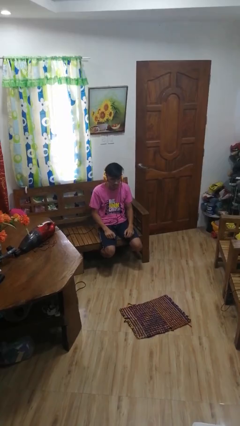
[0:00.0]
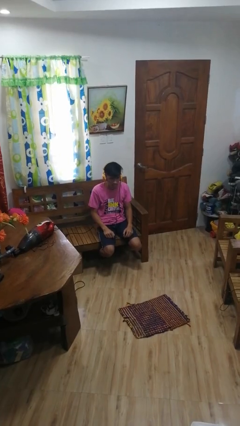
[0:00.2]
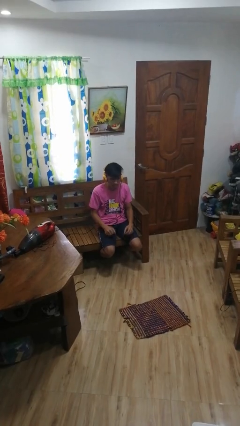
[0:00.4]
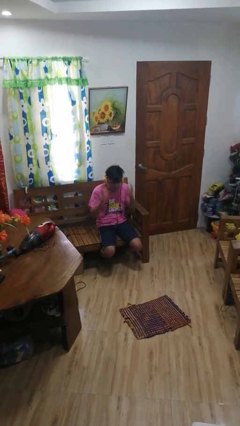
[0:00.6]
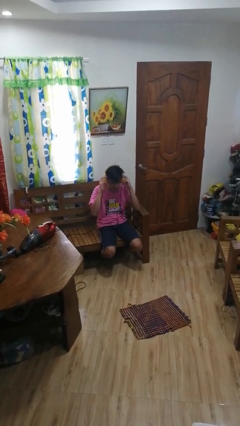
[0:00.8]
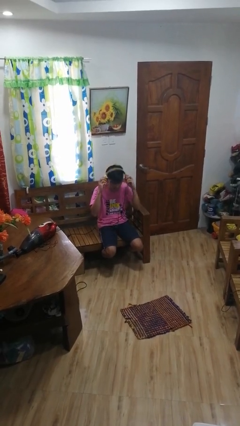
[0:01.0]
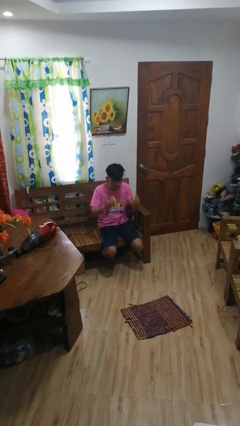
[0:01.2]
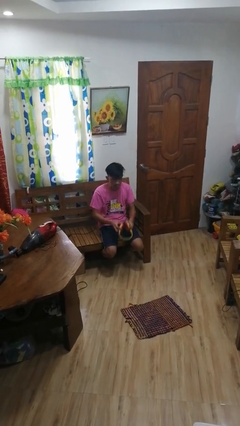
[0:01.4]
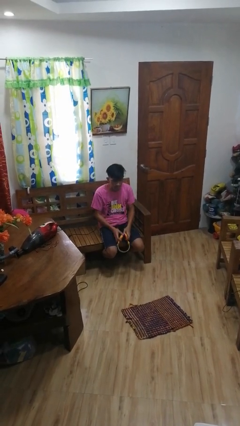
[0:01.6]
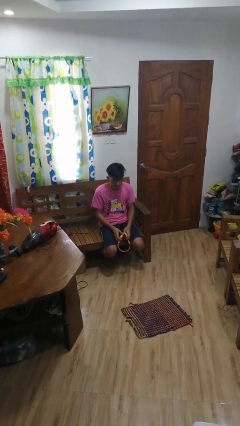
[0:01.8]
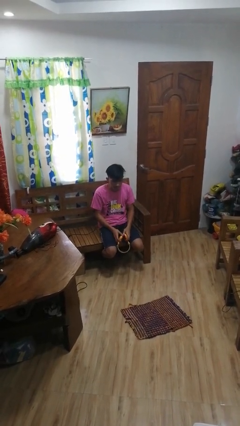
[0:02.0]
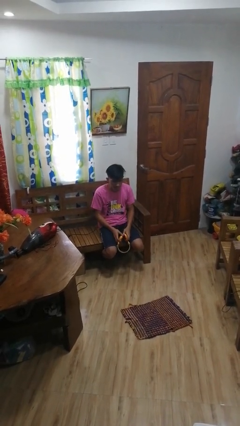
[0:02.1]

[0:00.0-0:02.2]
person takes off headphones

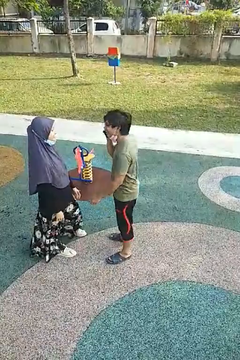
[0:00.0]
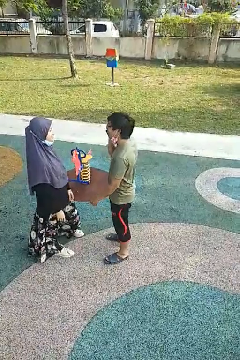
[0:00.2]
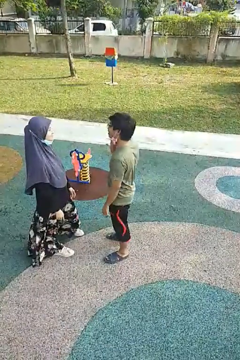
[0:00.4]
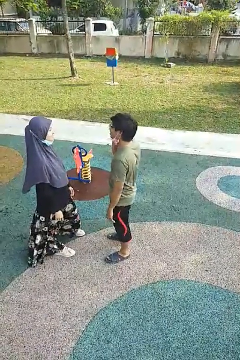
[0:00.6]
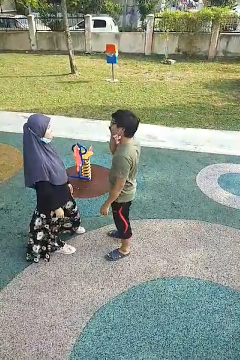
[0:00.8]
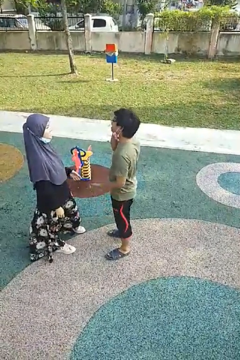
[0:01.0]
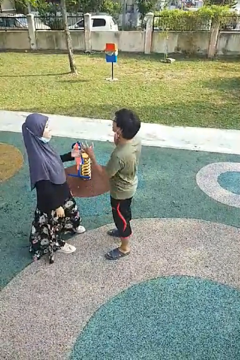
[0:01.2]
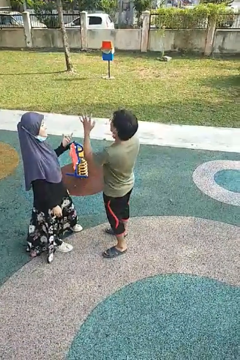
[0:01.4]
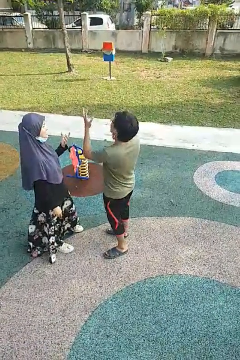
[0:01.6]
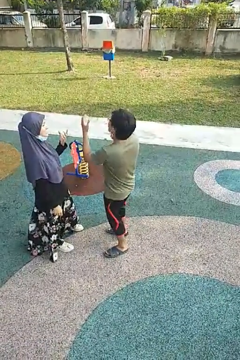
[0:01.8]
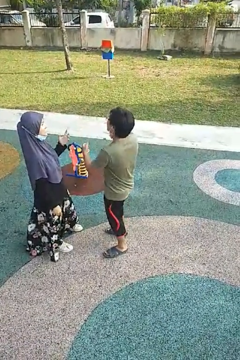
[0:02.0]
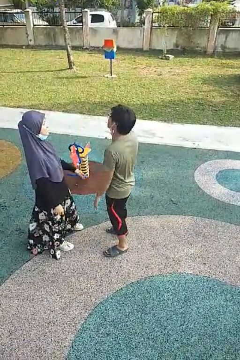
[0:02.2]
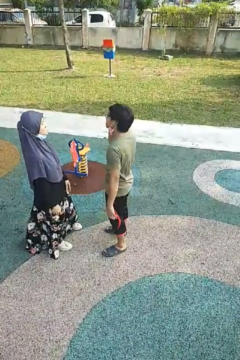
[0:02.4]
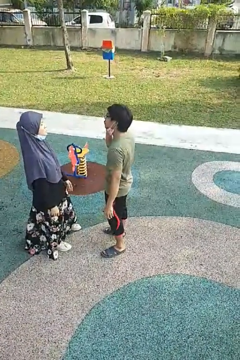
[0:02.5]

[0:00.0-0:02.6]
person laughs with person

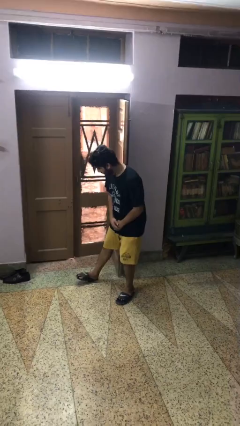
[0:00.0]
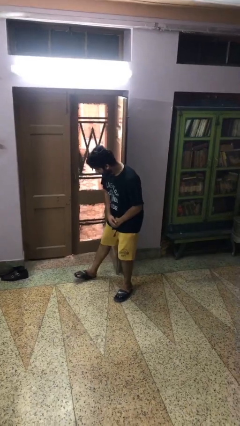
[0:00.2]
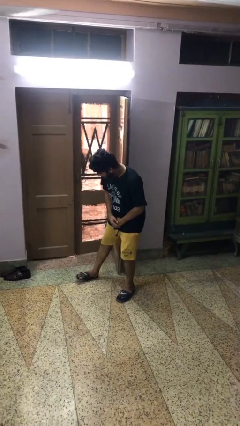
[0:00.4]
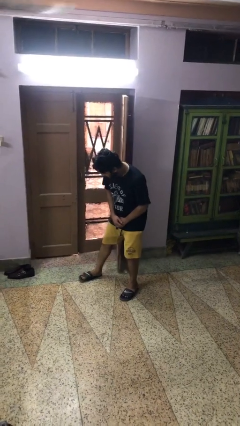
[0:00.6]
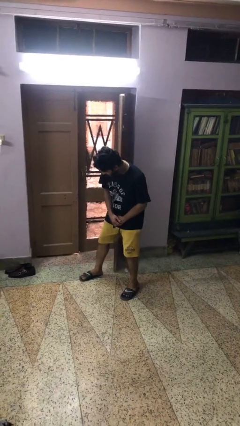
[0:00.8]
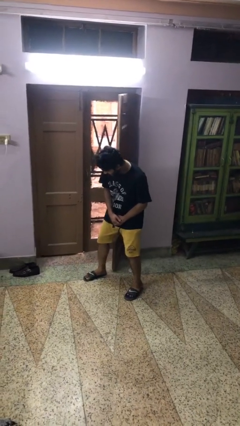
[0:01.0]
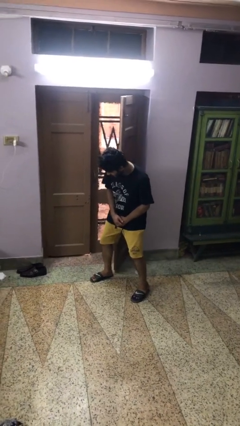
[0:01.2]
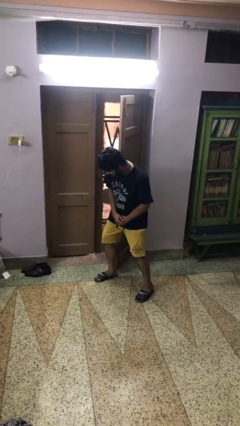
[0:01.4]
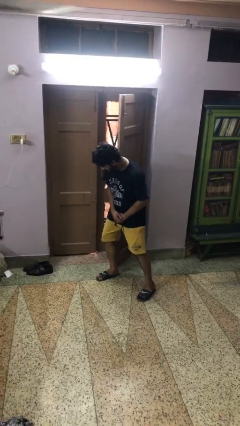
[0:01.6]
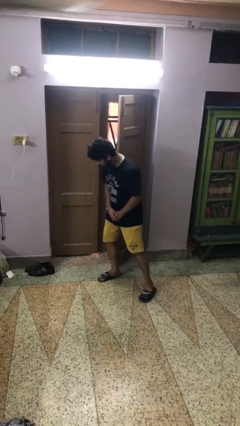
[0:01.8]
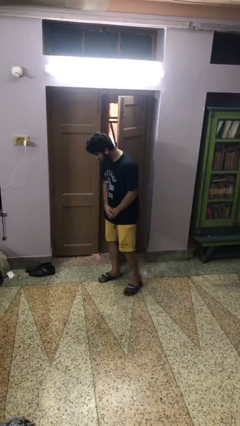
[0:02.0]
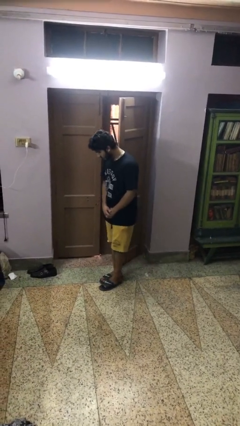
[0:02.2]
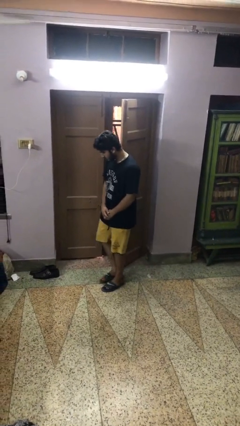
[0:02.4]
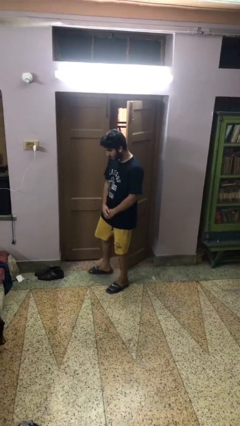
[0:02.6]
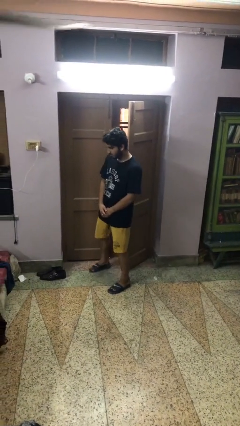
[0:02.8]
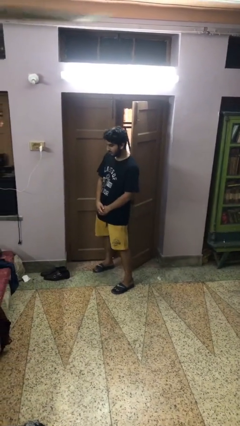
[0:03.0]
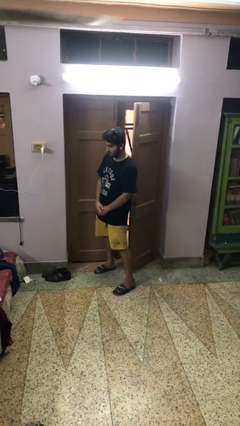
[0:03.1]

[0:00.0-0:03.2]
person closes door with hip

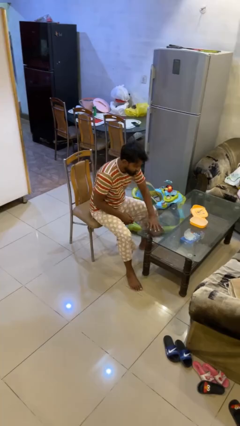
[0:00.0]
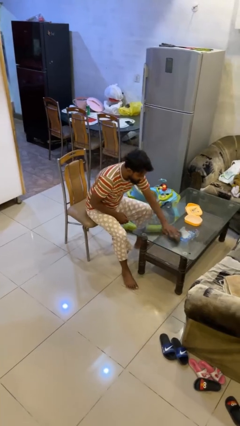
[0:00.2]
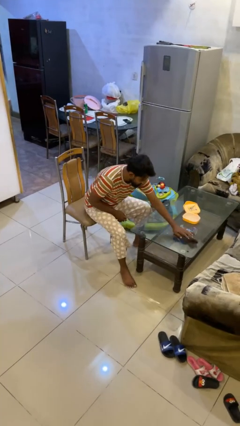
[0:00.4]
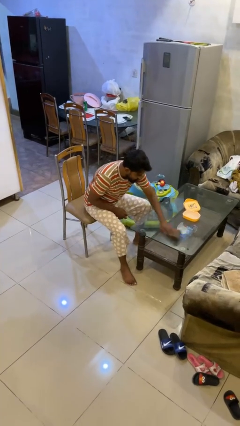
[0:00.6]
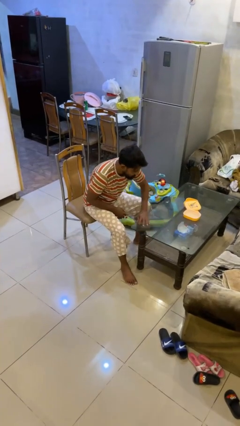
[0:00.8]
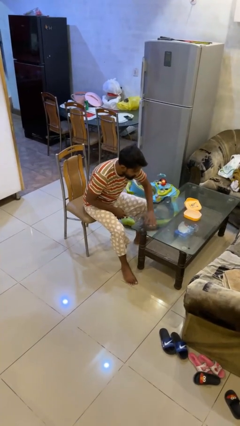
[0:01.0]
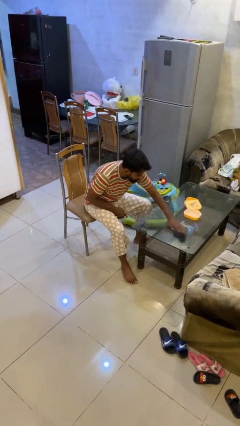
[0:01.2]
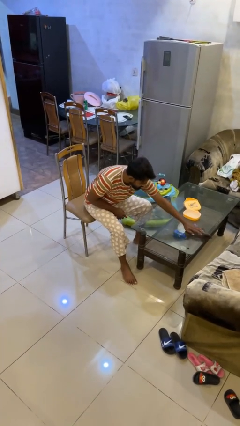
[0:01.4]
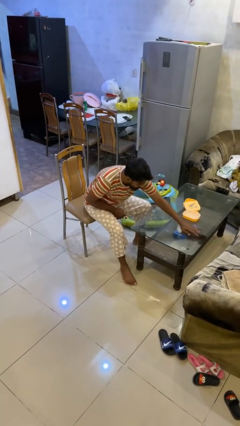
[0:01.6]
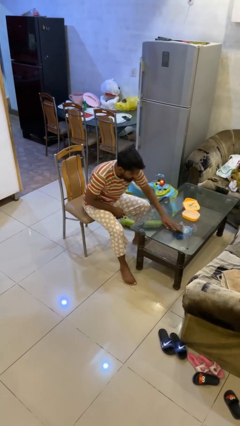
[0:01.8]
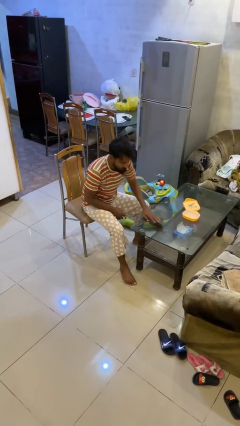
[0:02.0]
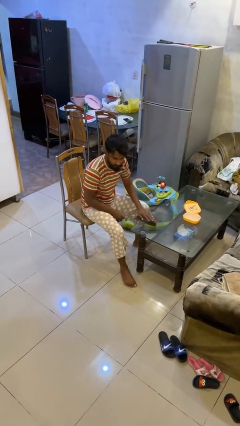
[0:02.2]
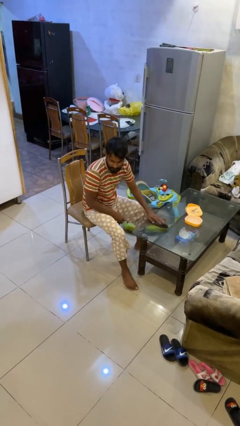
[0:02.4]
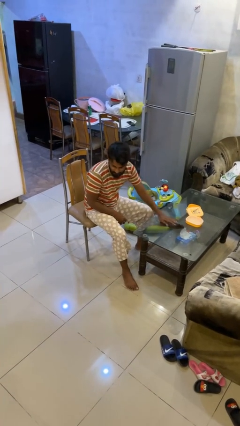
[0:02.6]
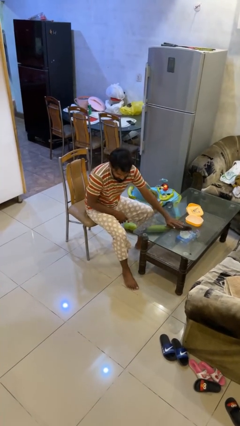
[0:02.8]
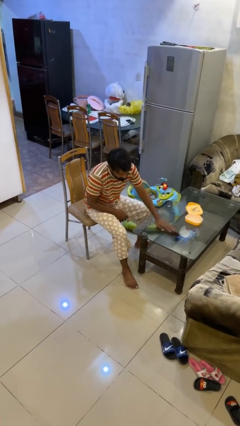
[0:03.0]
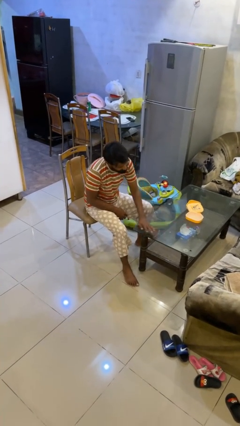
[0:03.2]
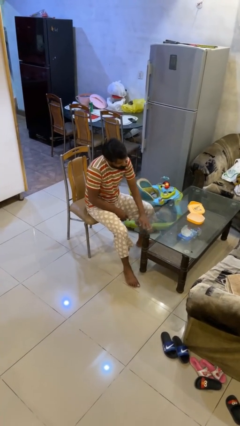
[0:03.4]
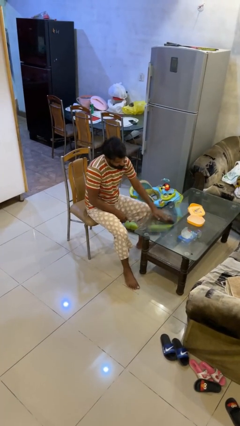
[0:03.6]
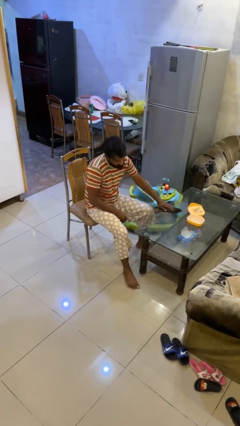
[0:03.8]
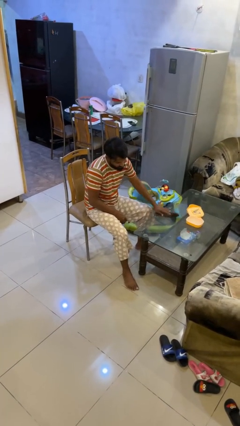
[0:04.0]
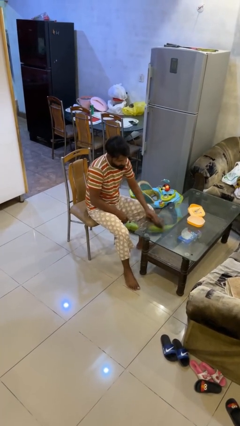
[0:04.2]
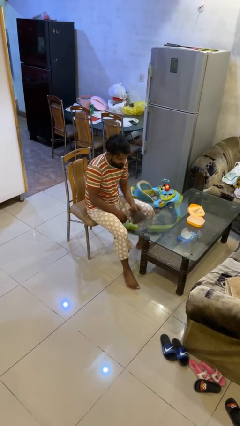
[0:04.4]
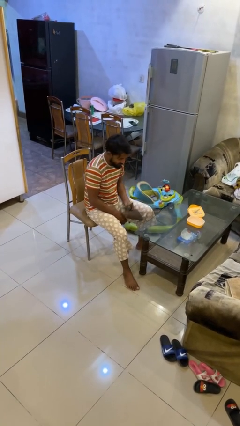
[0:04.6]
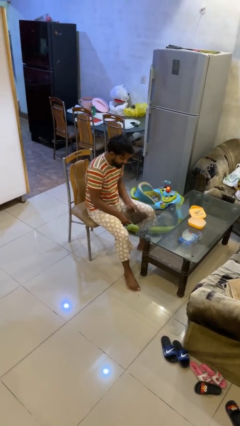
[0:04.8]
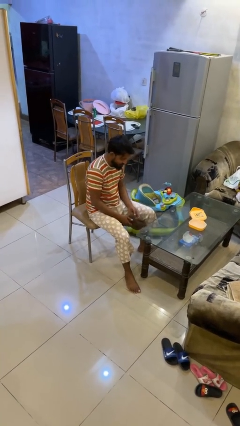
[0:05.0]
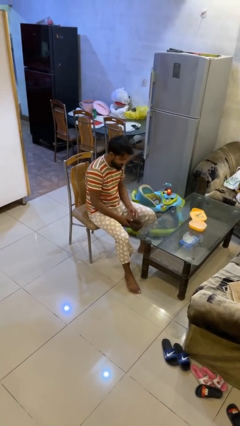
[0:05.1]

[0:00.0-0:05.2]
person cleans table with rag

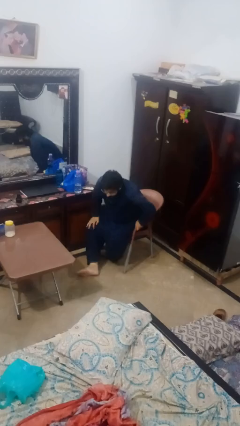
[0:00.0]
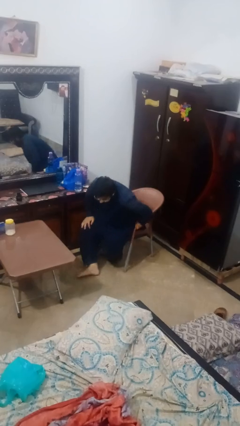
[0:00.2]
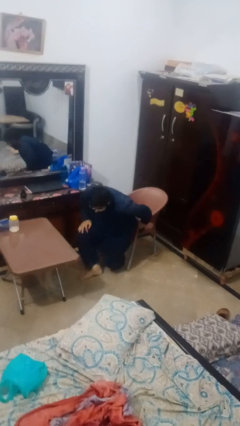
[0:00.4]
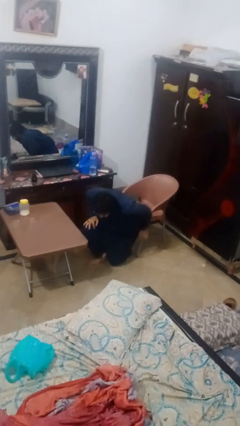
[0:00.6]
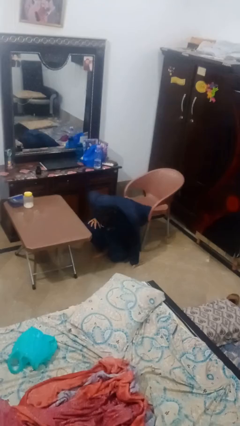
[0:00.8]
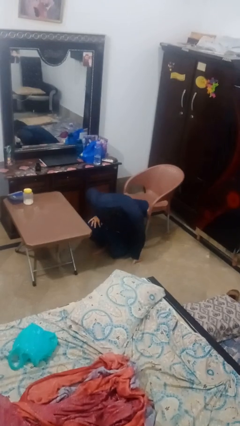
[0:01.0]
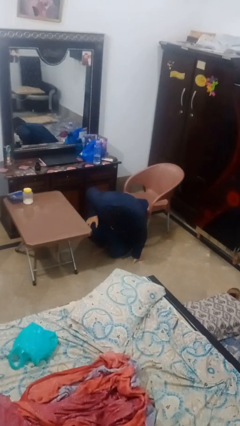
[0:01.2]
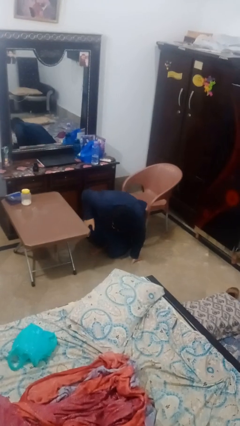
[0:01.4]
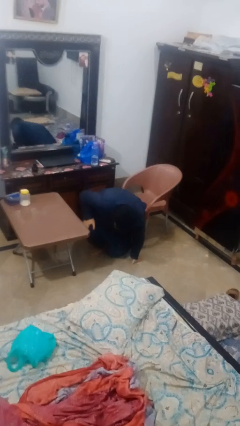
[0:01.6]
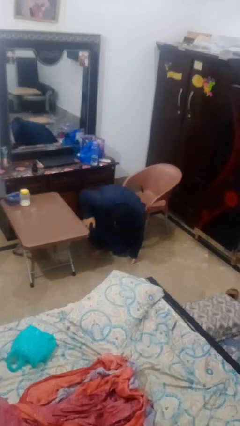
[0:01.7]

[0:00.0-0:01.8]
person falls from chair

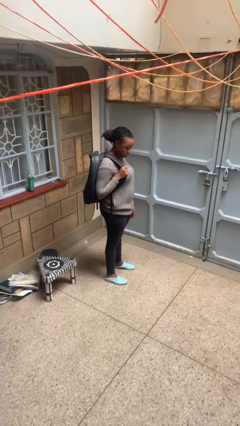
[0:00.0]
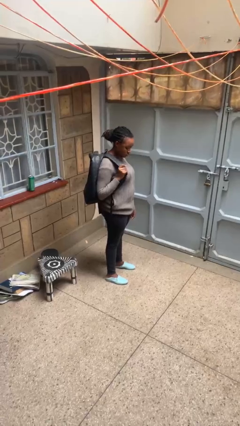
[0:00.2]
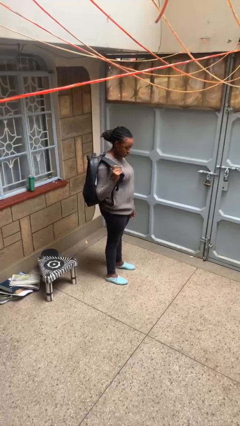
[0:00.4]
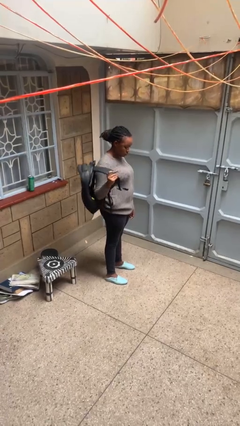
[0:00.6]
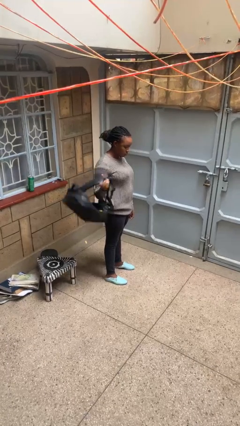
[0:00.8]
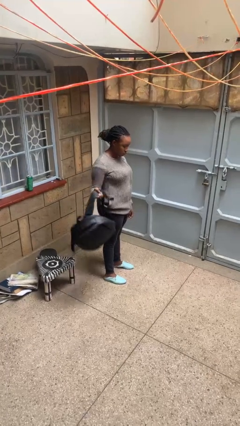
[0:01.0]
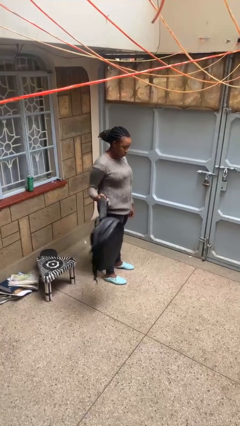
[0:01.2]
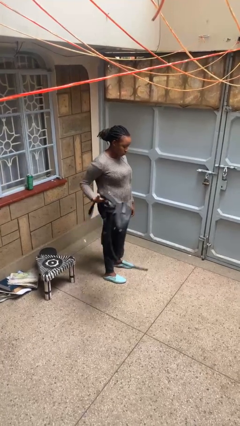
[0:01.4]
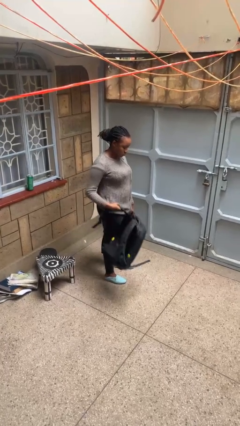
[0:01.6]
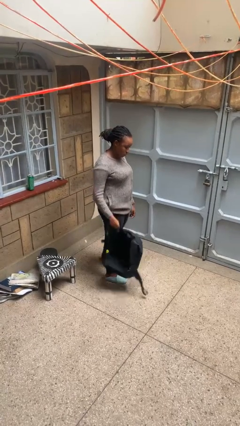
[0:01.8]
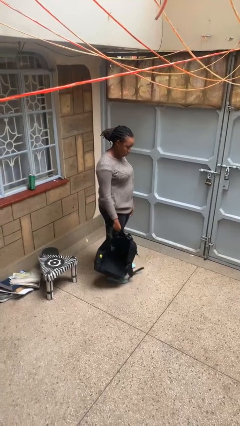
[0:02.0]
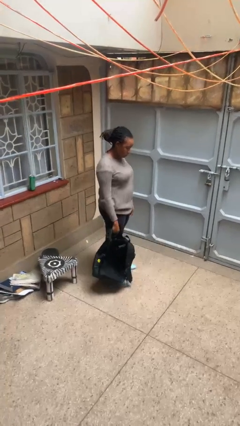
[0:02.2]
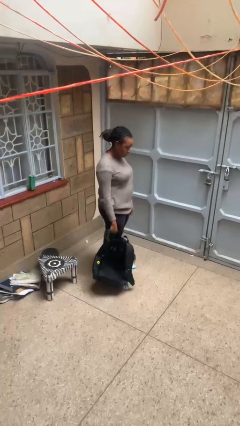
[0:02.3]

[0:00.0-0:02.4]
person takes off backpack

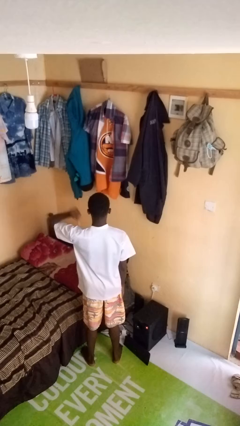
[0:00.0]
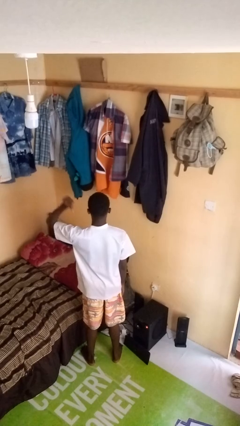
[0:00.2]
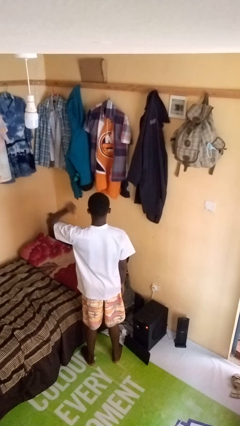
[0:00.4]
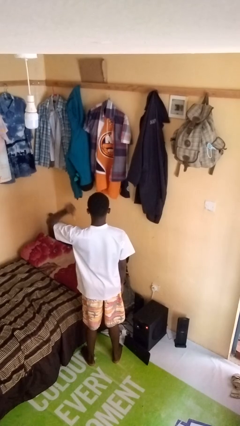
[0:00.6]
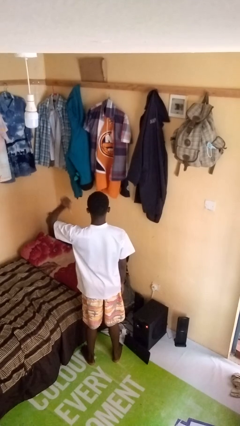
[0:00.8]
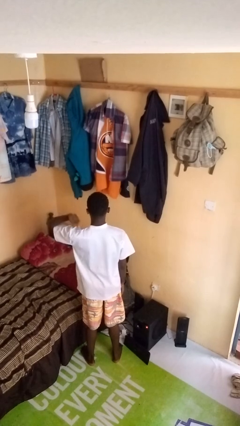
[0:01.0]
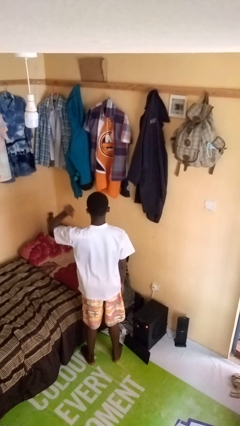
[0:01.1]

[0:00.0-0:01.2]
person gestures behind me
